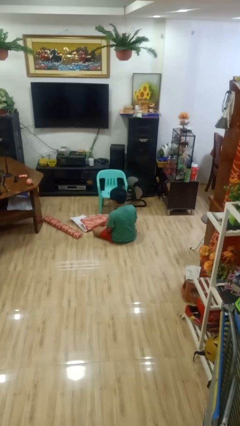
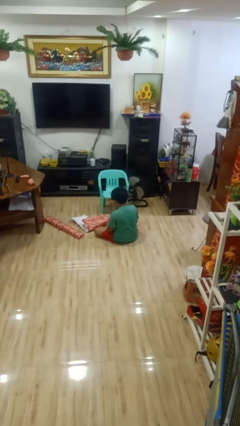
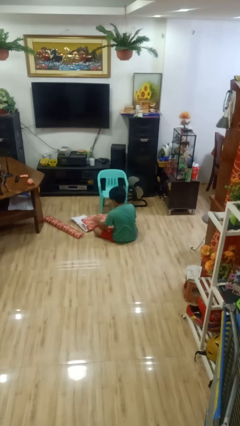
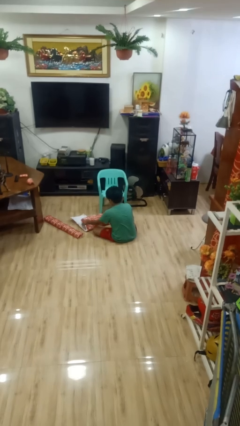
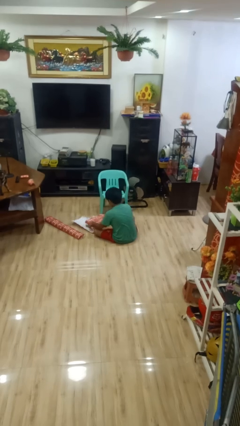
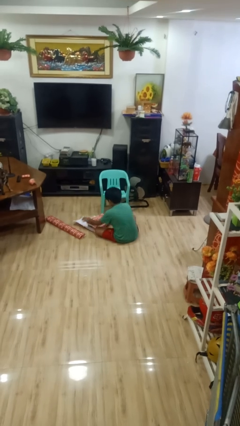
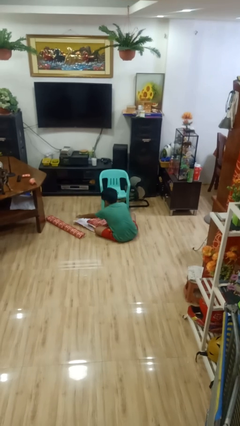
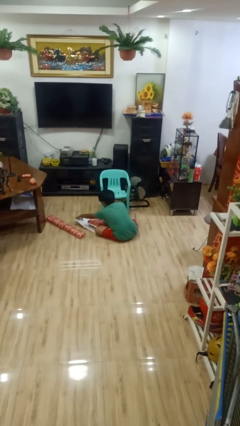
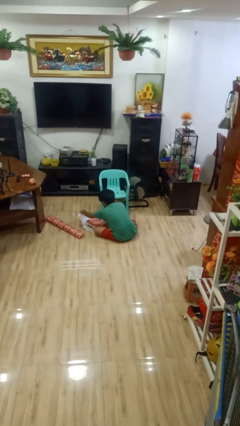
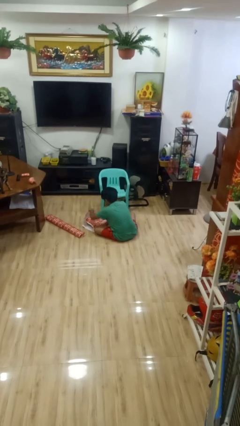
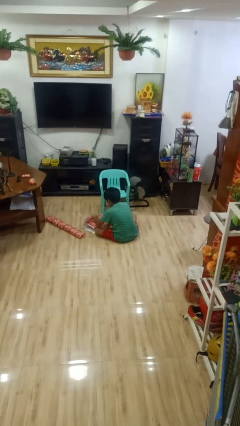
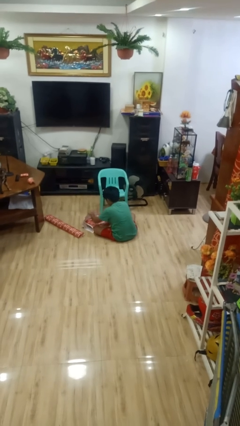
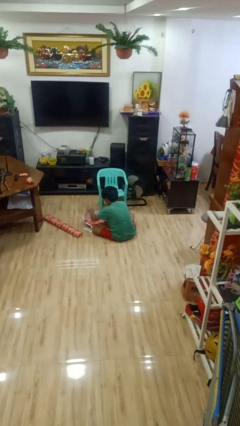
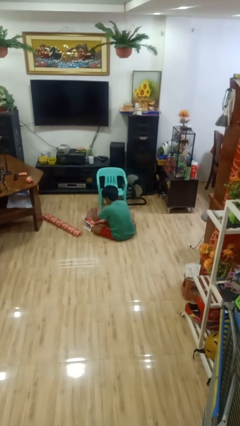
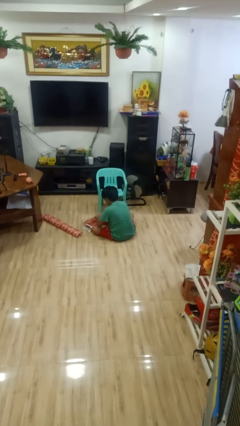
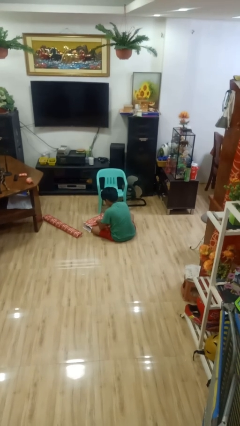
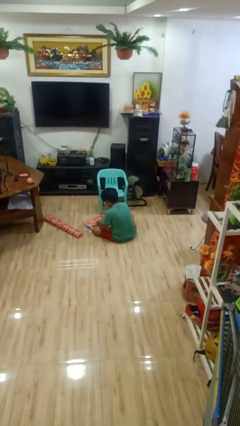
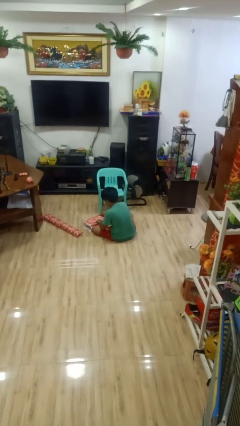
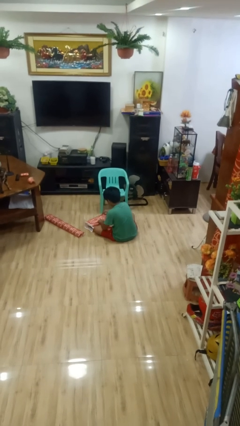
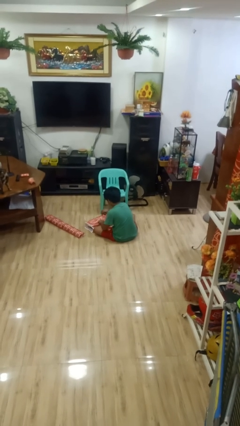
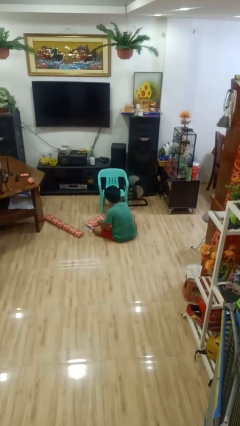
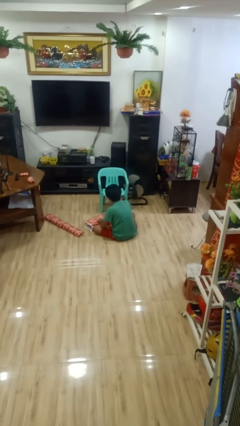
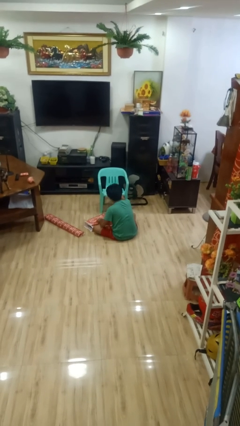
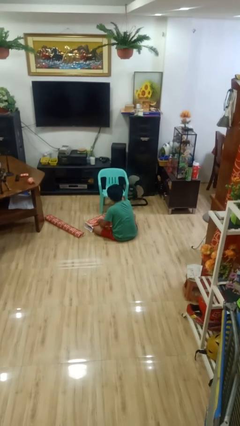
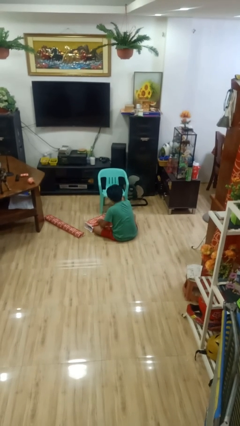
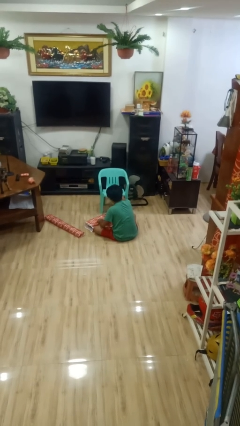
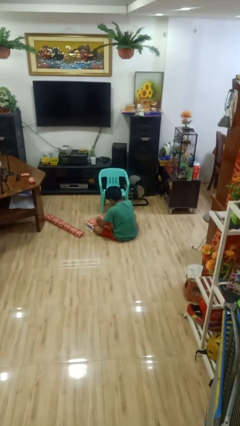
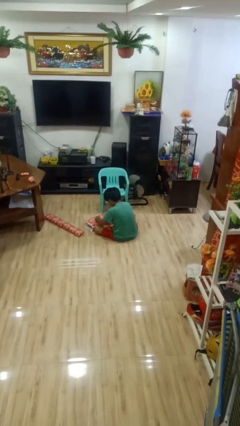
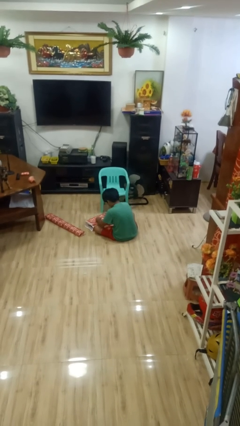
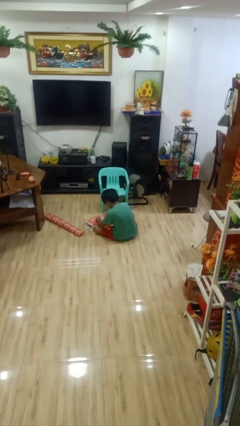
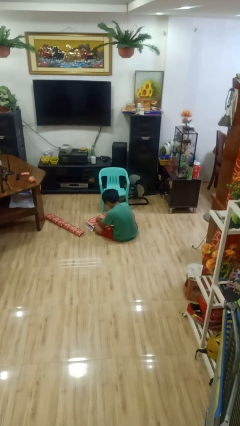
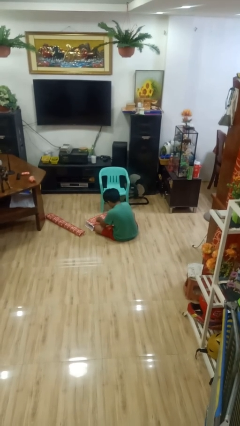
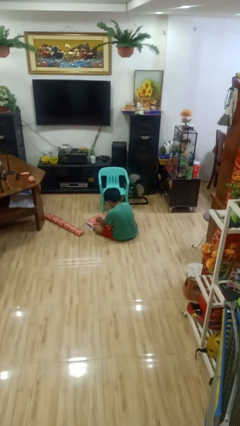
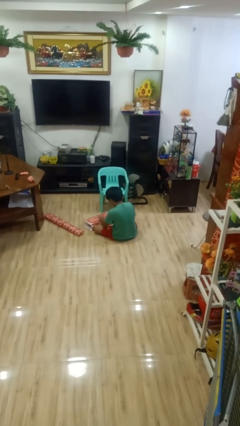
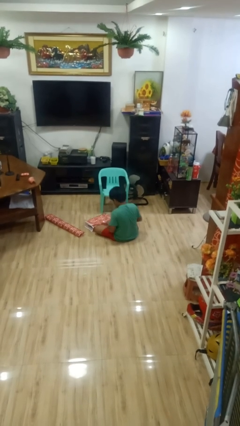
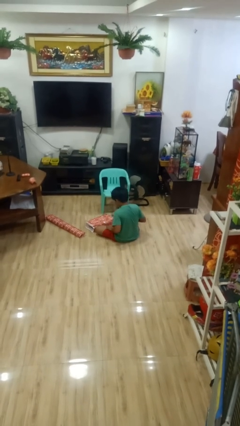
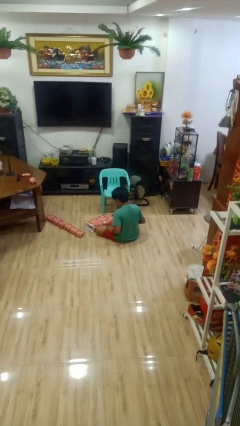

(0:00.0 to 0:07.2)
person wraps box

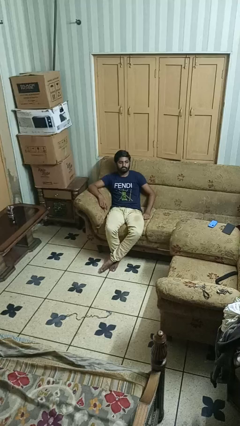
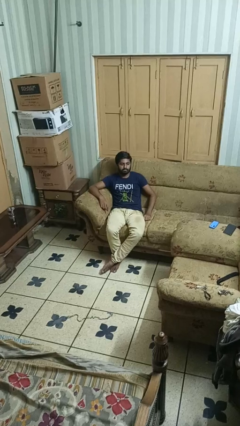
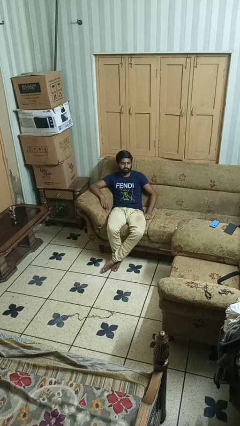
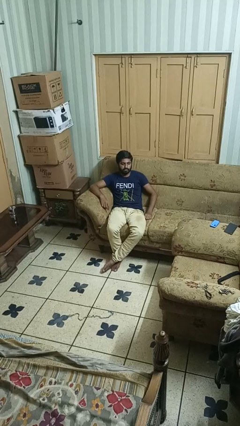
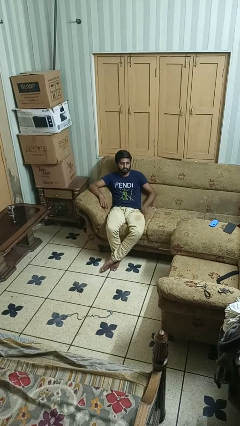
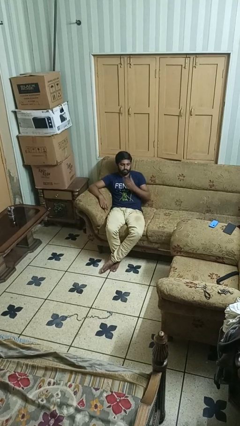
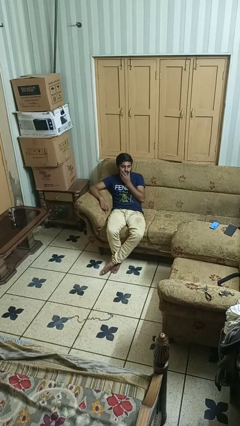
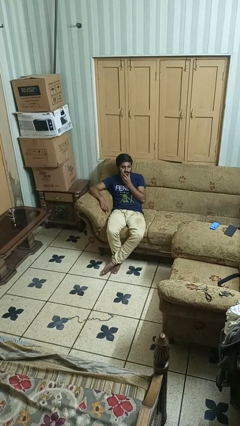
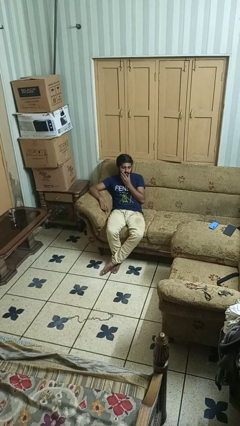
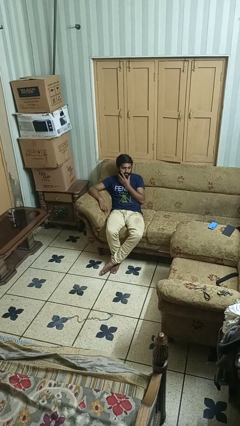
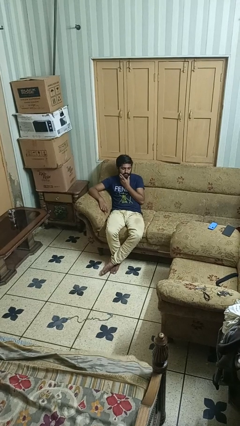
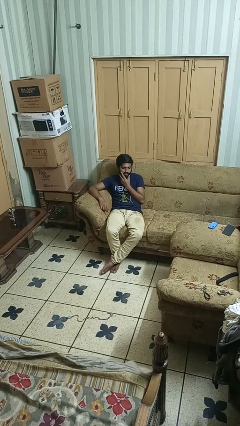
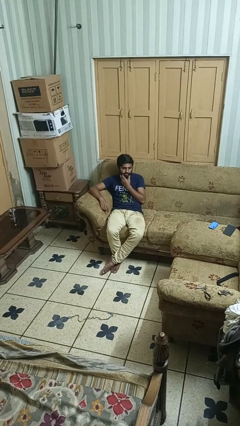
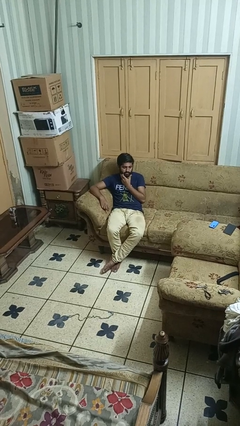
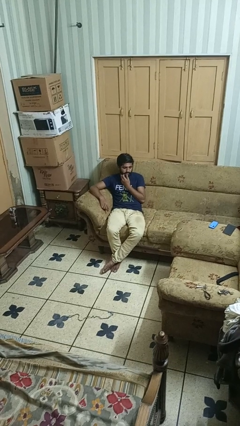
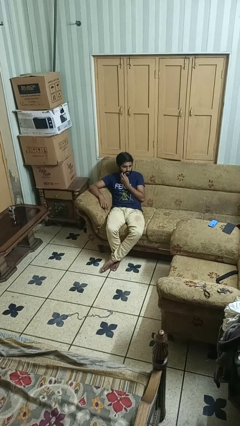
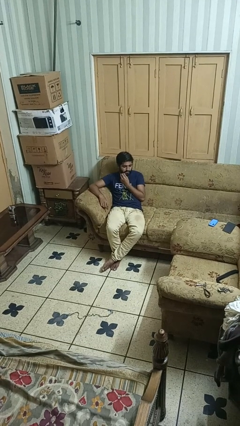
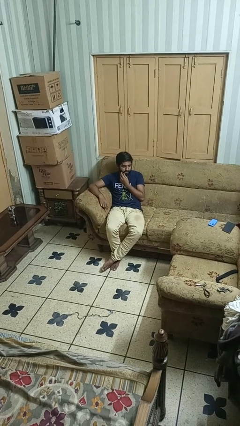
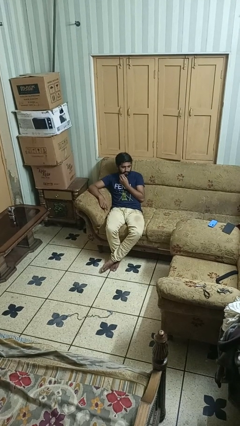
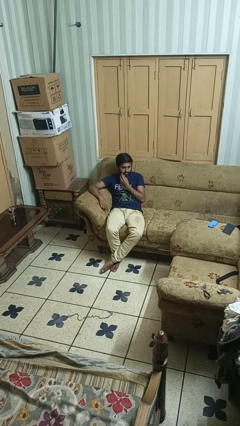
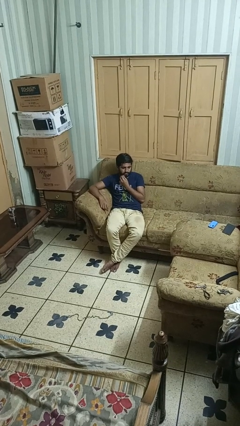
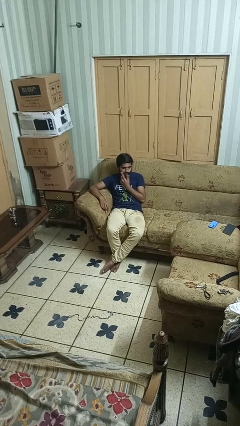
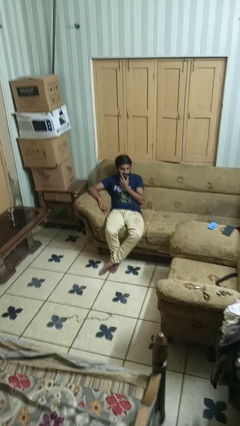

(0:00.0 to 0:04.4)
person strokes chin

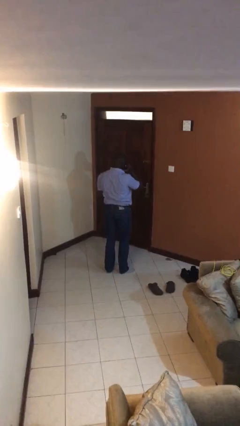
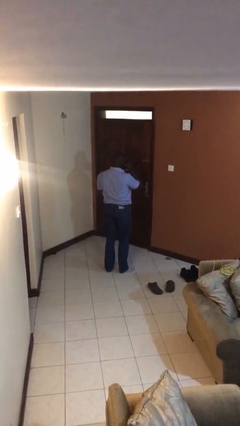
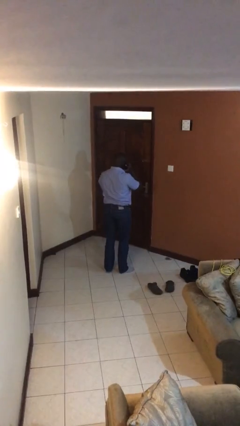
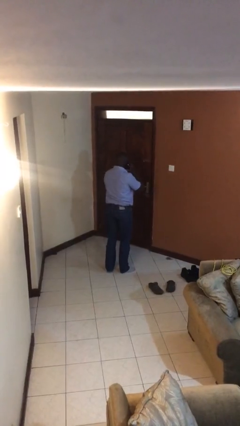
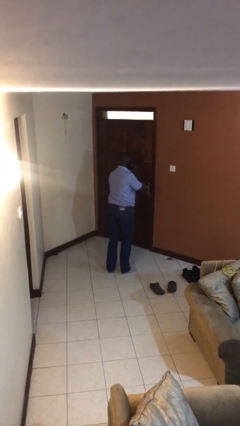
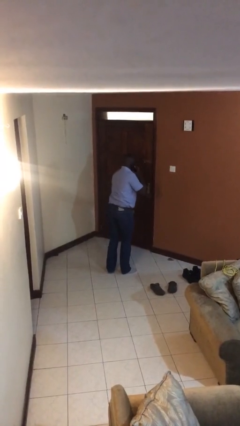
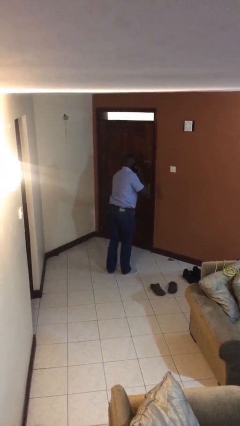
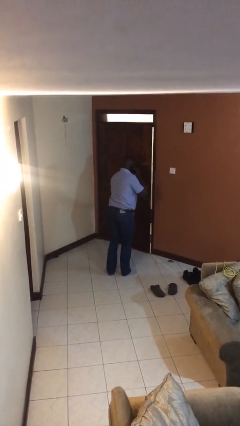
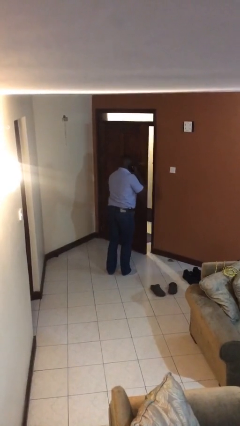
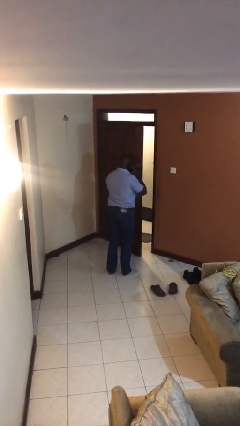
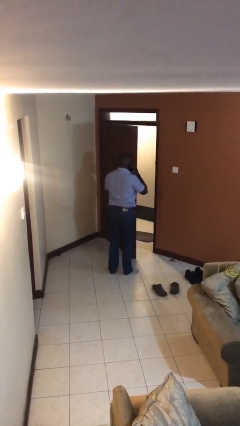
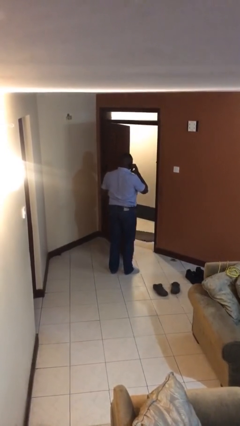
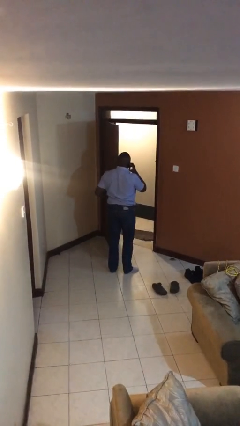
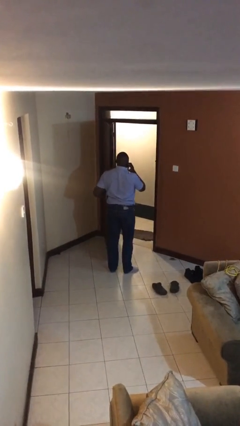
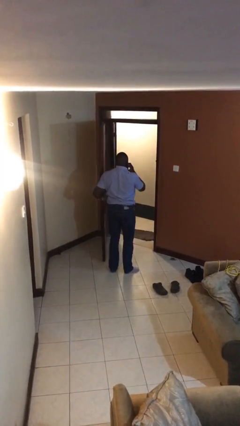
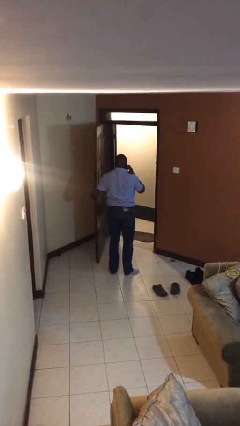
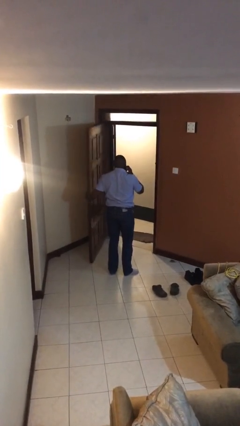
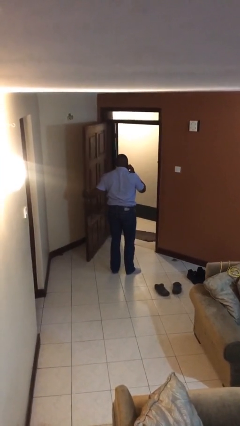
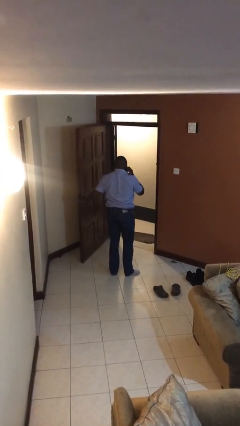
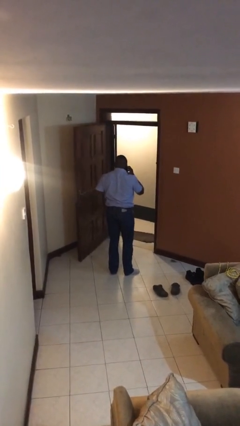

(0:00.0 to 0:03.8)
person opens facility door

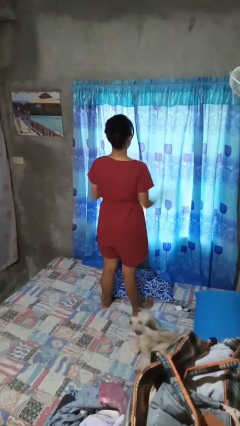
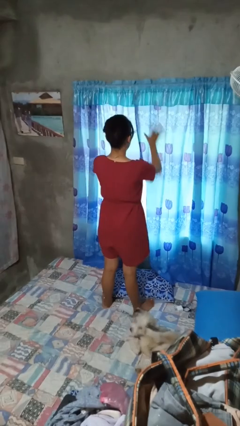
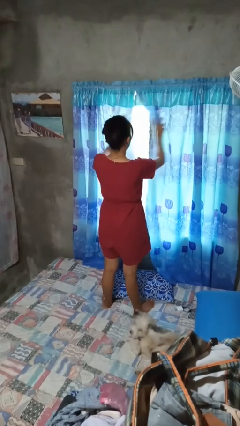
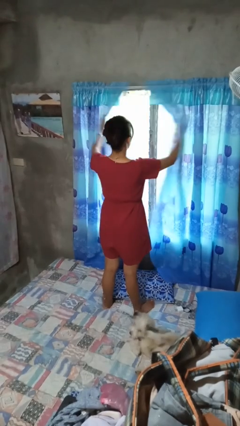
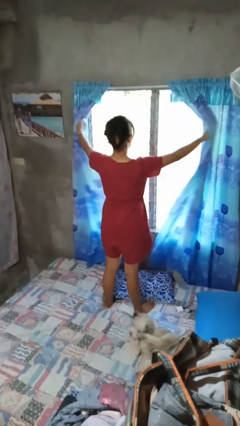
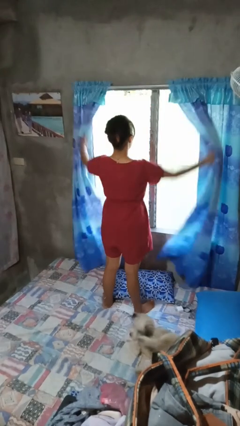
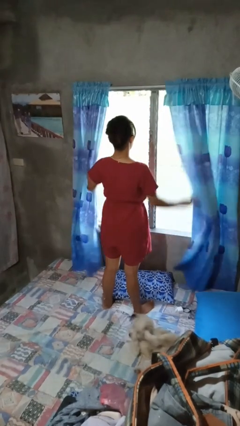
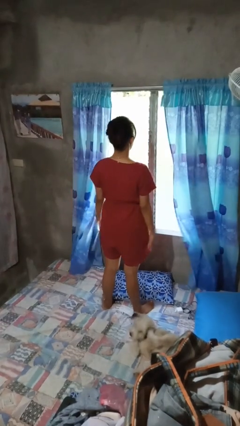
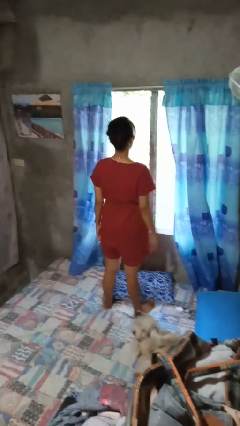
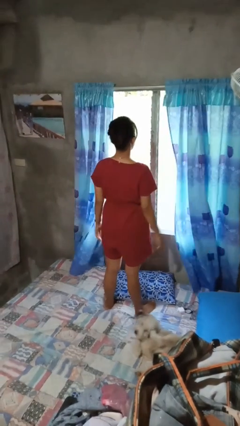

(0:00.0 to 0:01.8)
person opens curtains

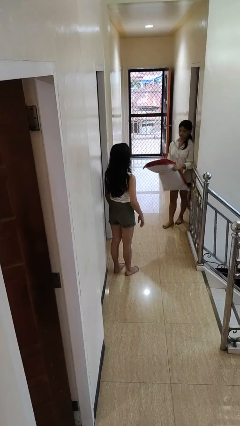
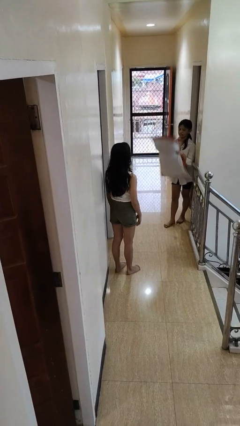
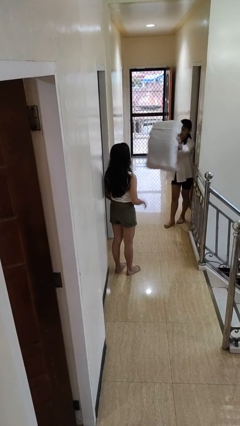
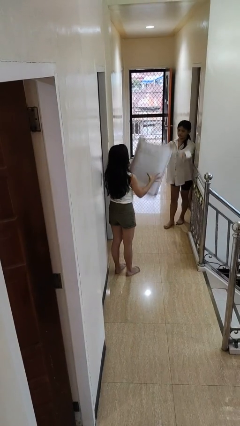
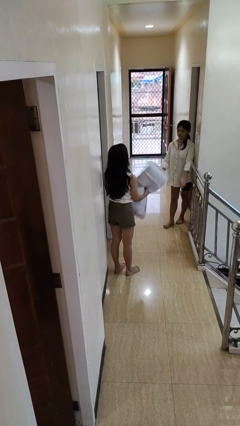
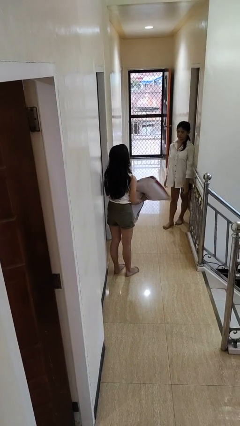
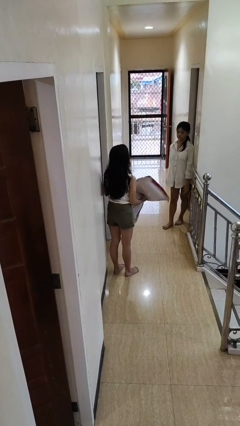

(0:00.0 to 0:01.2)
person catches object from person
